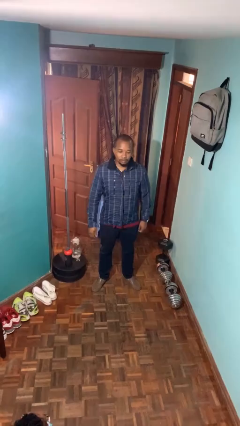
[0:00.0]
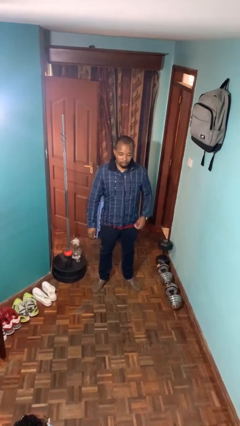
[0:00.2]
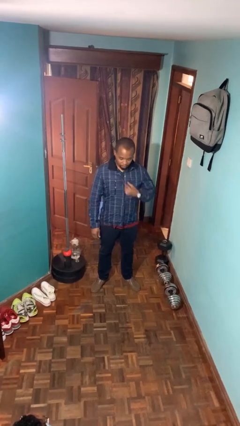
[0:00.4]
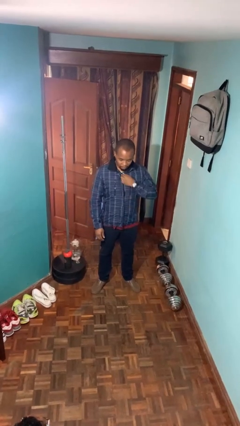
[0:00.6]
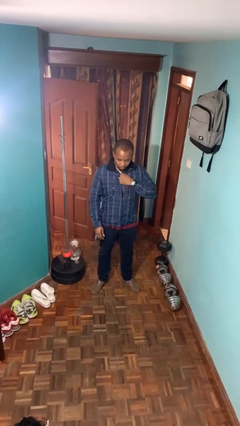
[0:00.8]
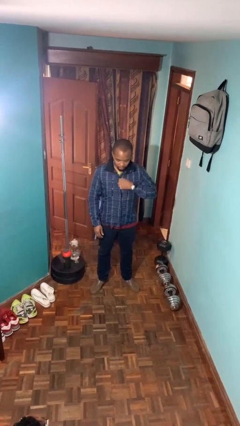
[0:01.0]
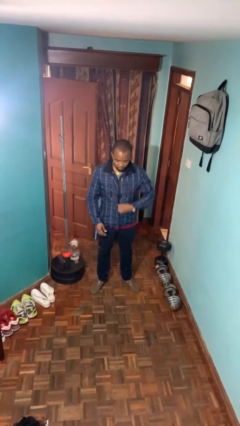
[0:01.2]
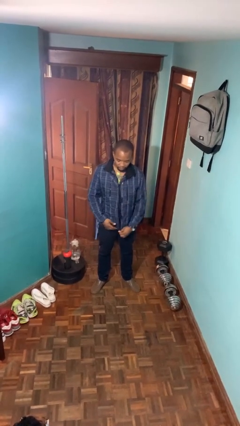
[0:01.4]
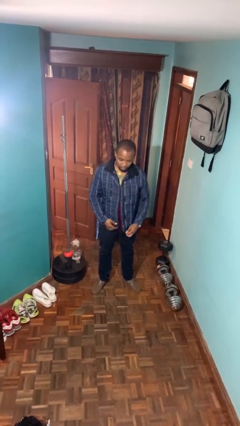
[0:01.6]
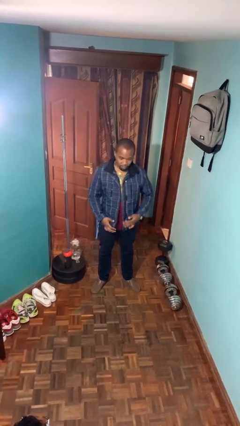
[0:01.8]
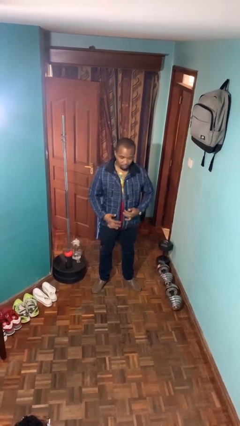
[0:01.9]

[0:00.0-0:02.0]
person unzips jacket

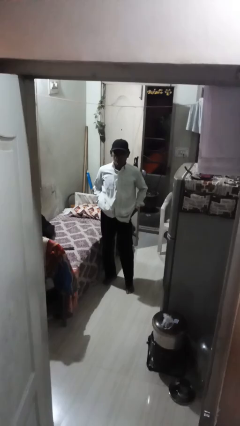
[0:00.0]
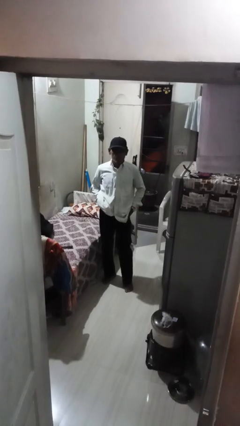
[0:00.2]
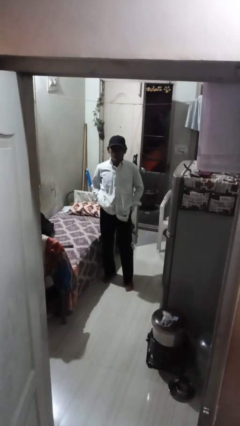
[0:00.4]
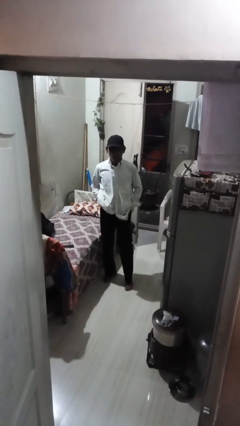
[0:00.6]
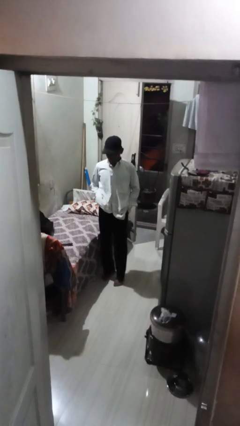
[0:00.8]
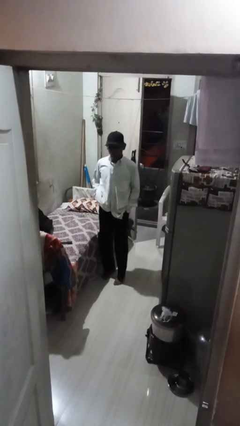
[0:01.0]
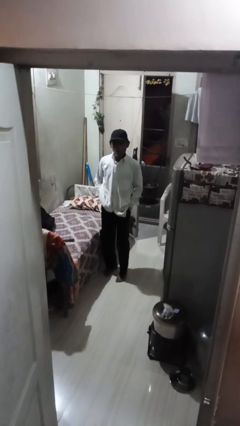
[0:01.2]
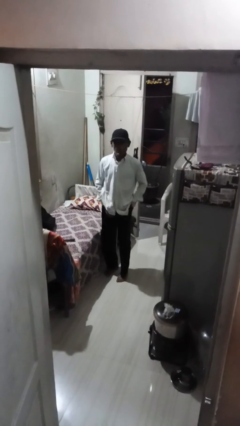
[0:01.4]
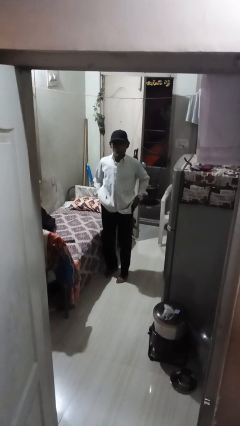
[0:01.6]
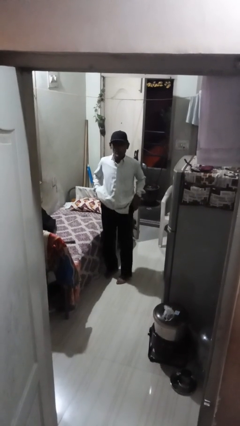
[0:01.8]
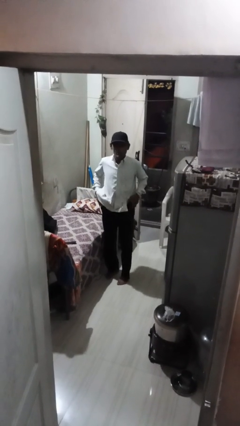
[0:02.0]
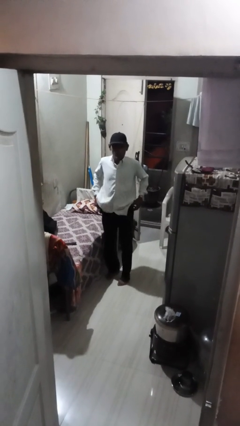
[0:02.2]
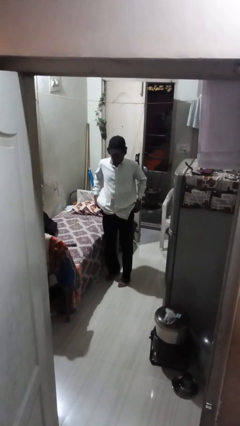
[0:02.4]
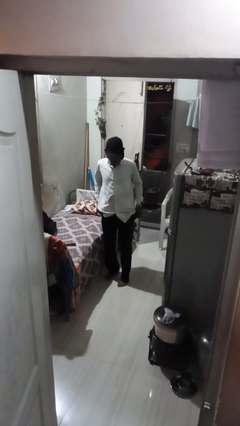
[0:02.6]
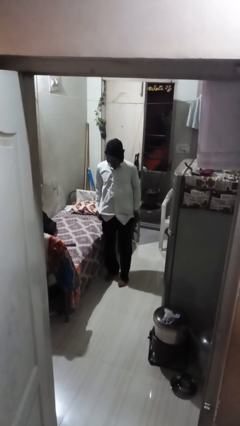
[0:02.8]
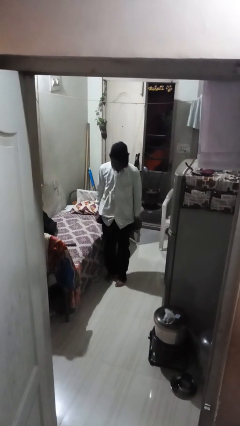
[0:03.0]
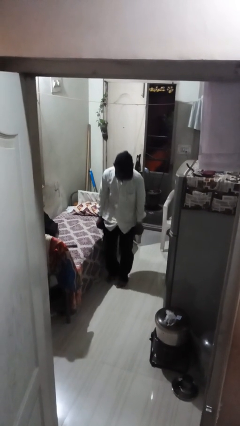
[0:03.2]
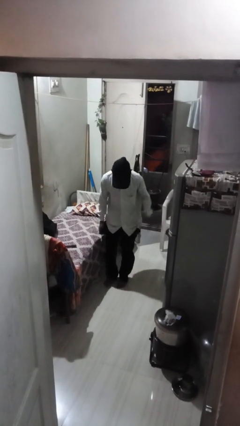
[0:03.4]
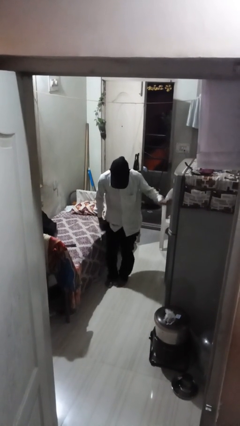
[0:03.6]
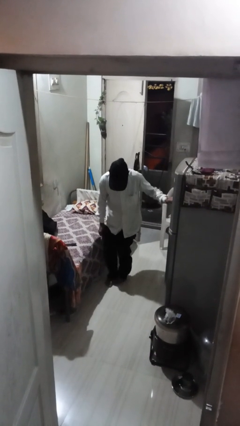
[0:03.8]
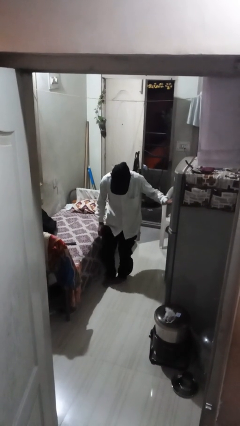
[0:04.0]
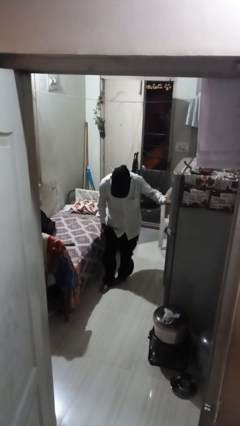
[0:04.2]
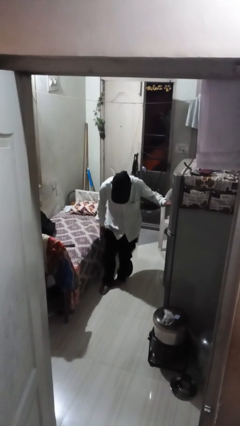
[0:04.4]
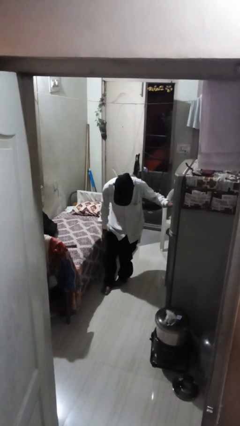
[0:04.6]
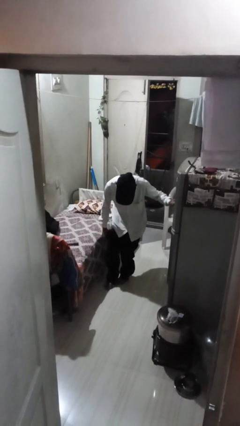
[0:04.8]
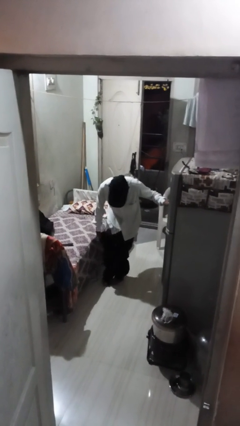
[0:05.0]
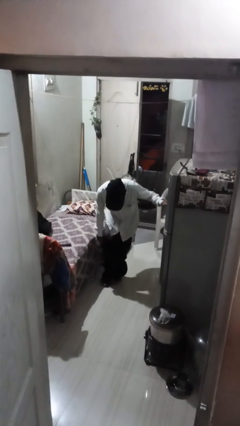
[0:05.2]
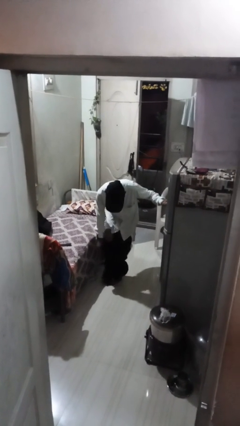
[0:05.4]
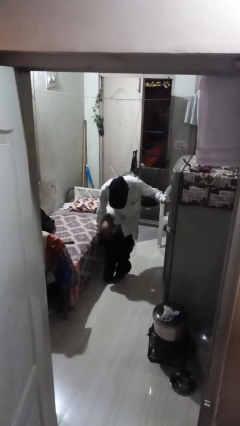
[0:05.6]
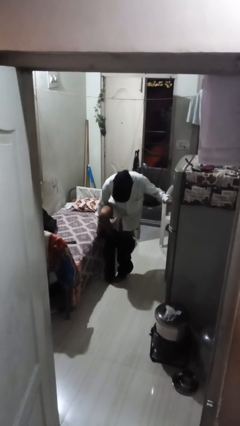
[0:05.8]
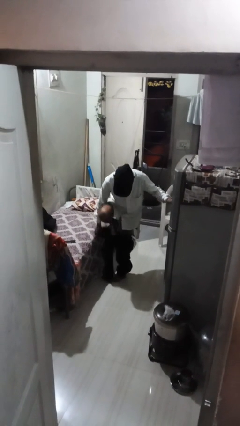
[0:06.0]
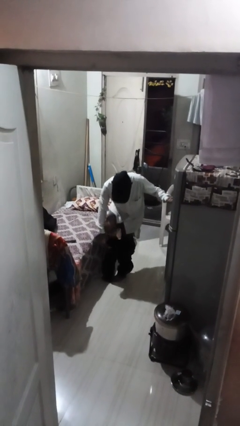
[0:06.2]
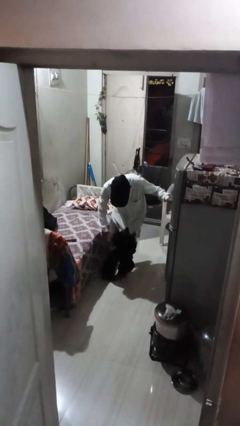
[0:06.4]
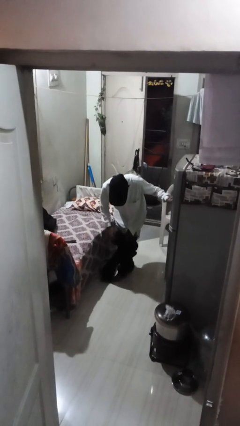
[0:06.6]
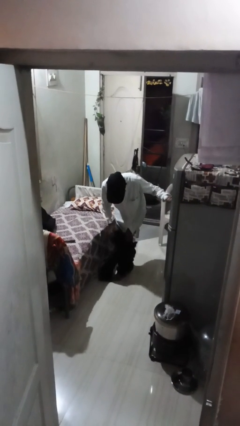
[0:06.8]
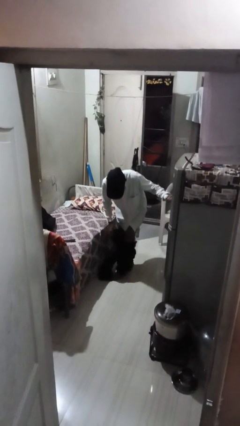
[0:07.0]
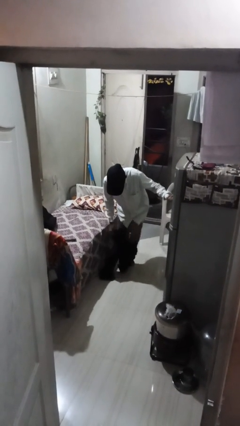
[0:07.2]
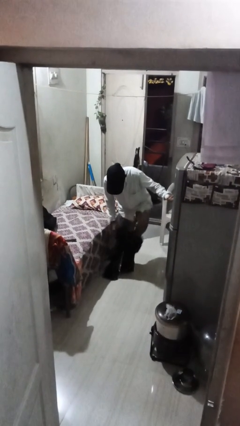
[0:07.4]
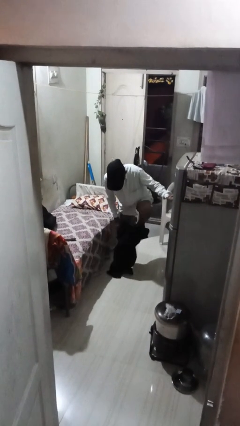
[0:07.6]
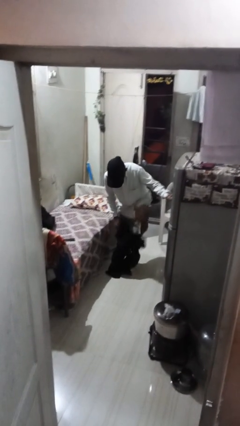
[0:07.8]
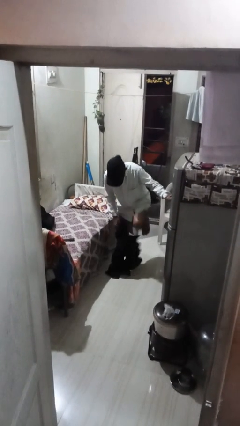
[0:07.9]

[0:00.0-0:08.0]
person takes off pants

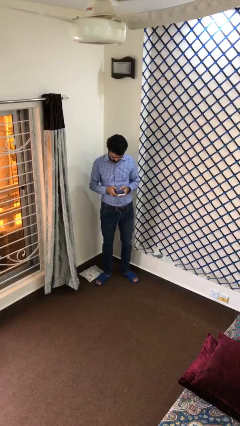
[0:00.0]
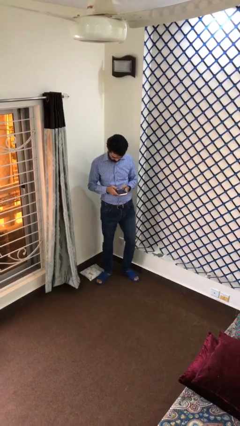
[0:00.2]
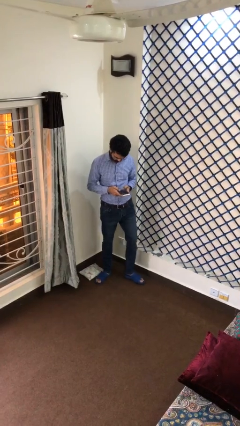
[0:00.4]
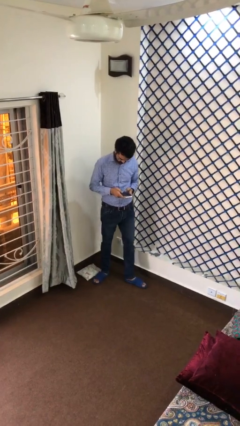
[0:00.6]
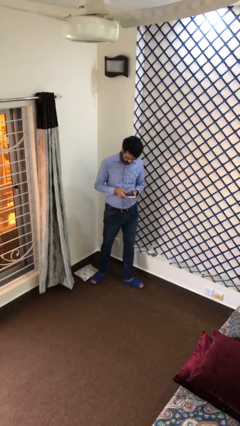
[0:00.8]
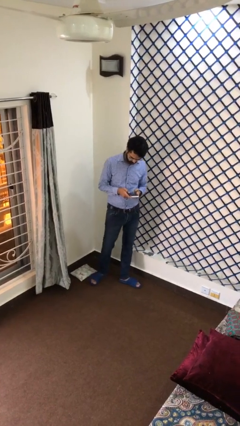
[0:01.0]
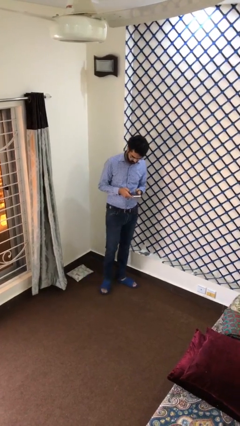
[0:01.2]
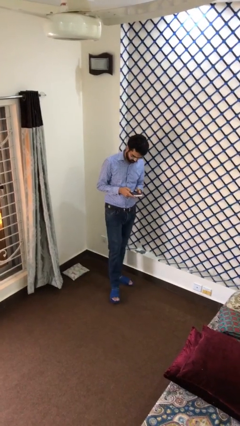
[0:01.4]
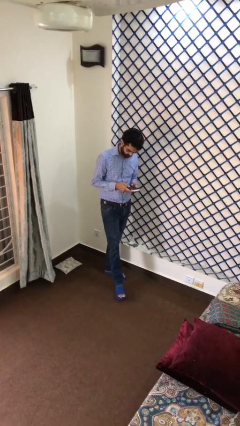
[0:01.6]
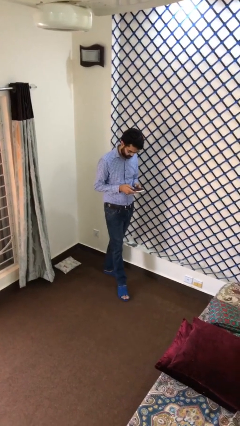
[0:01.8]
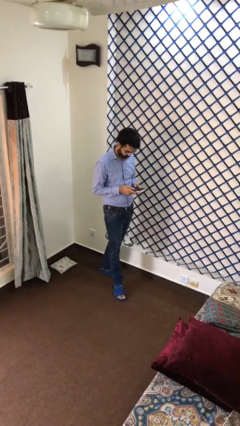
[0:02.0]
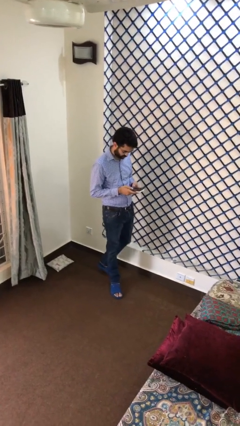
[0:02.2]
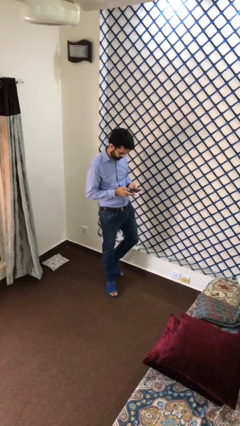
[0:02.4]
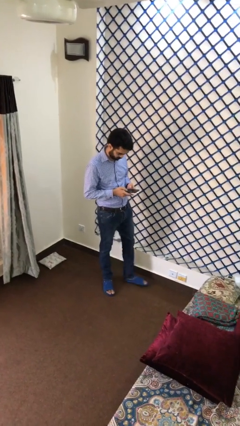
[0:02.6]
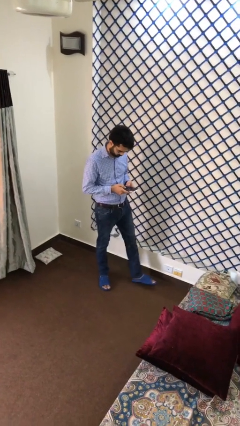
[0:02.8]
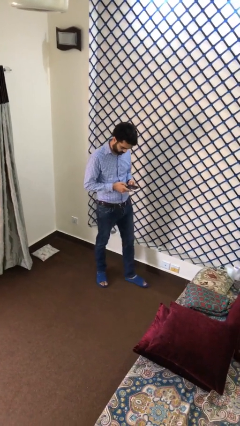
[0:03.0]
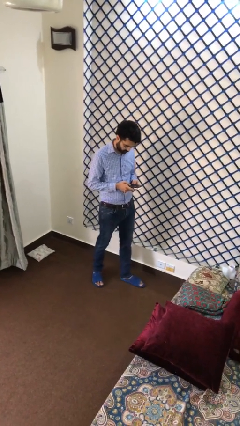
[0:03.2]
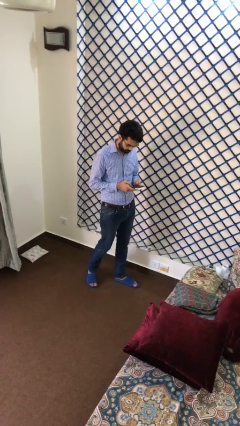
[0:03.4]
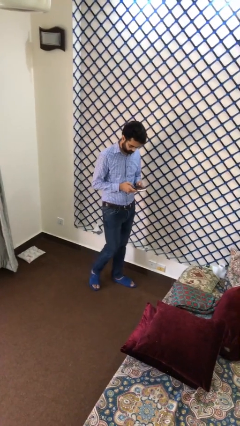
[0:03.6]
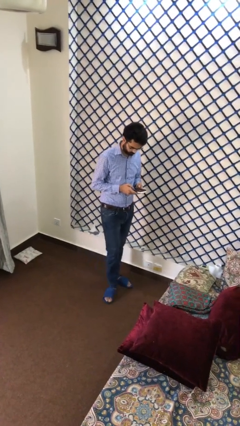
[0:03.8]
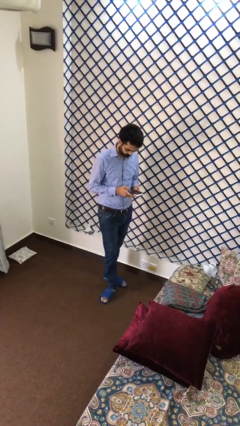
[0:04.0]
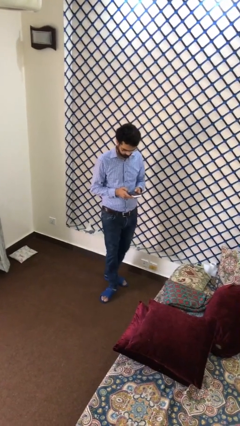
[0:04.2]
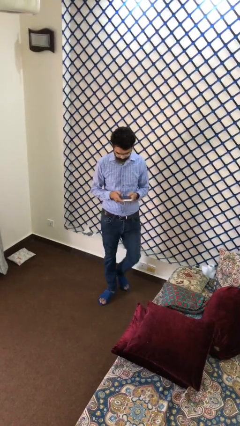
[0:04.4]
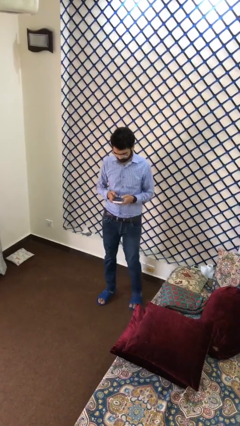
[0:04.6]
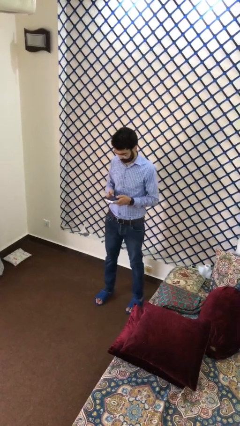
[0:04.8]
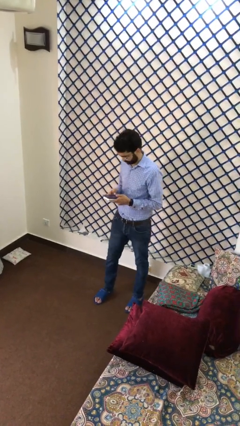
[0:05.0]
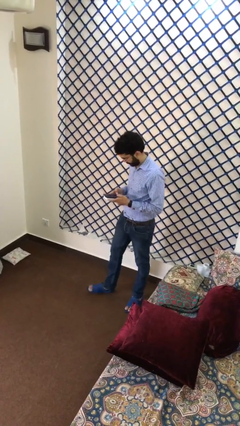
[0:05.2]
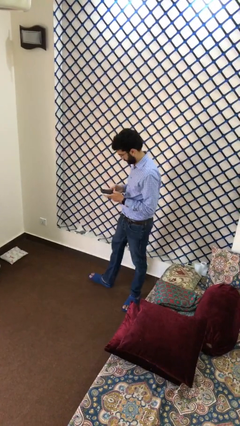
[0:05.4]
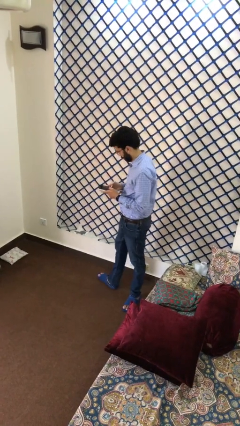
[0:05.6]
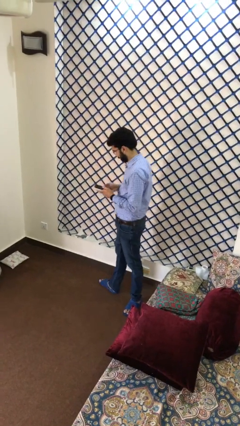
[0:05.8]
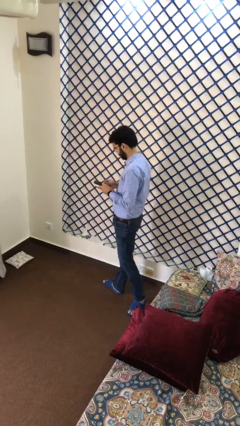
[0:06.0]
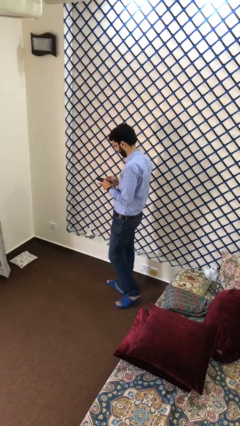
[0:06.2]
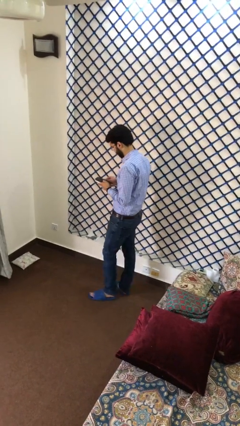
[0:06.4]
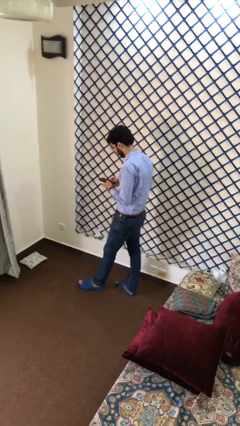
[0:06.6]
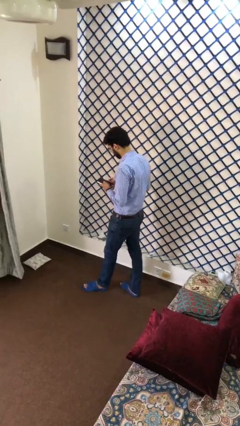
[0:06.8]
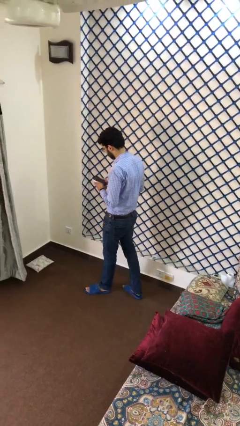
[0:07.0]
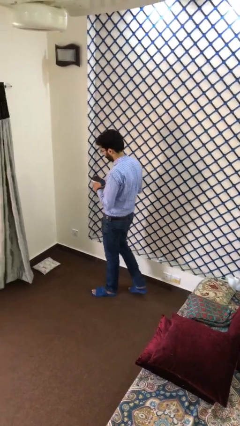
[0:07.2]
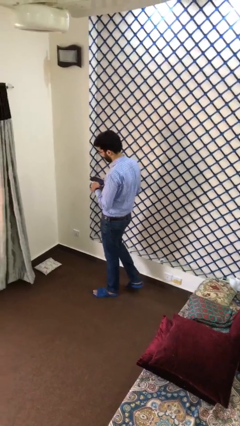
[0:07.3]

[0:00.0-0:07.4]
person texts on phone

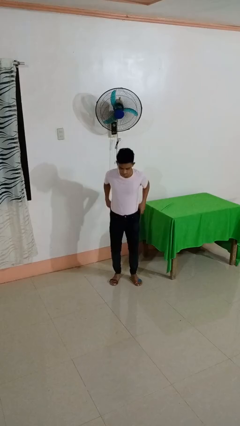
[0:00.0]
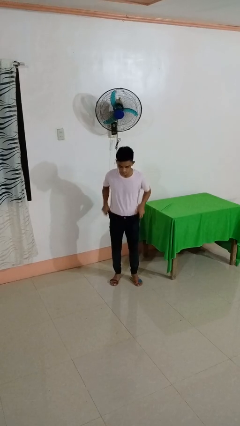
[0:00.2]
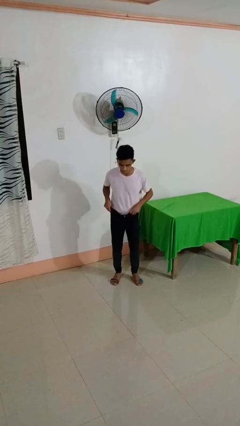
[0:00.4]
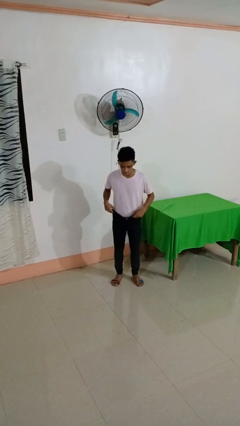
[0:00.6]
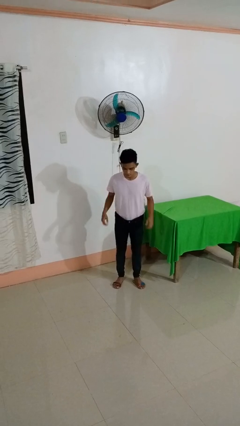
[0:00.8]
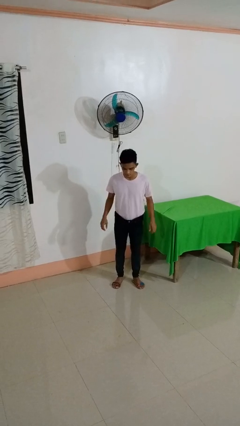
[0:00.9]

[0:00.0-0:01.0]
person hikes up pants
